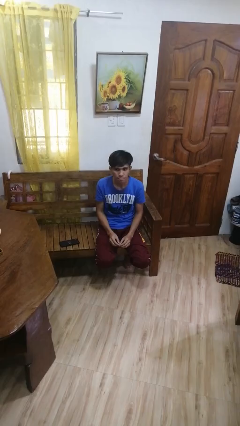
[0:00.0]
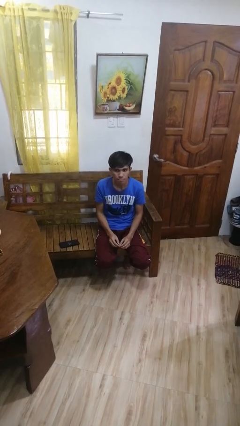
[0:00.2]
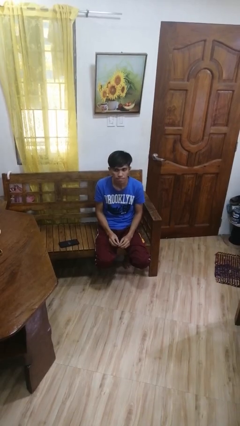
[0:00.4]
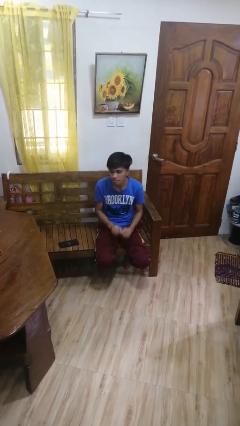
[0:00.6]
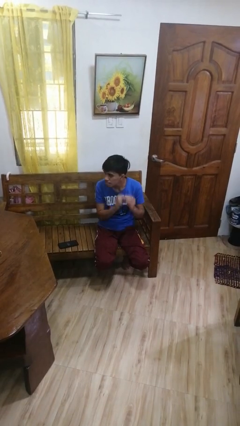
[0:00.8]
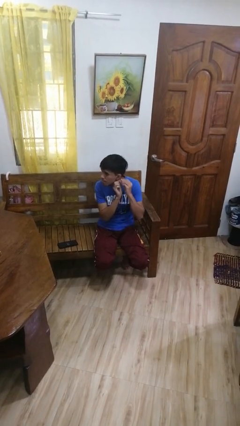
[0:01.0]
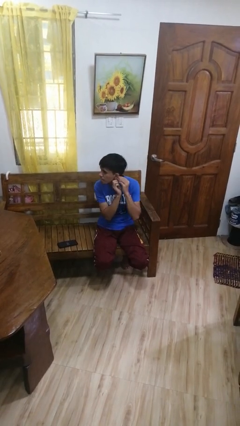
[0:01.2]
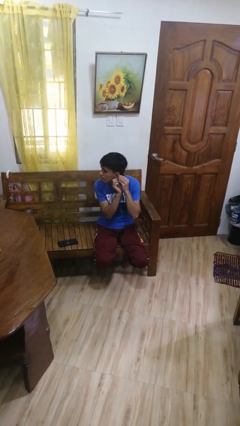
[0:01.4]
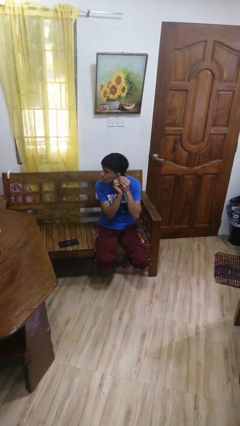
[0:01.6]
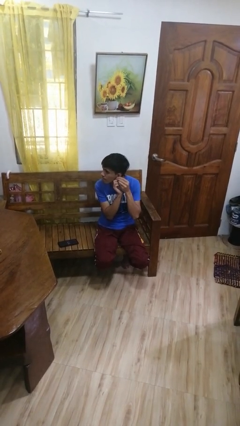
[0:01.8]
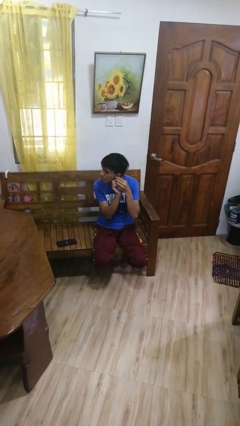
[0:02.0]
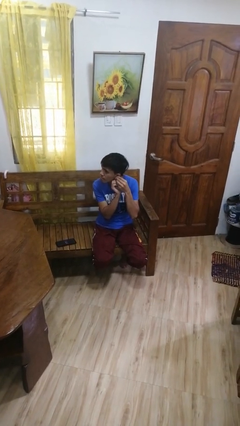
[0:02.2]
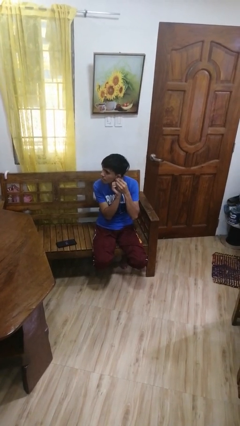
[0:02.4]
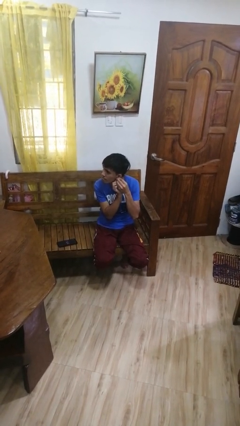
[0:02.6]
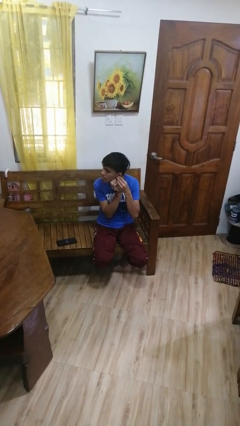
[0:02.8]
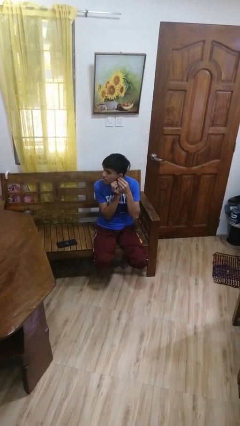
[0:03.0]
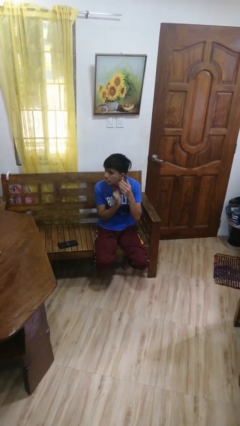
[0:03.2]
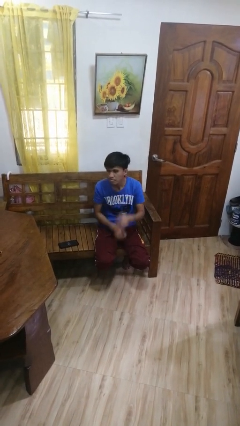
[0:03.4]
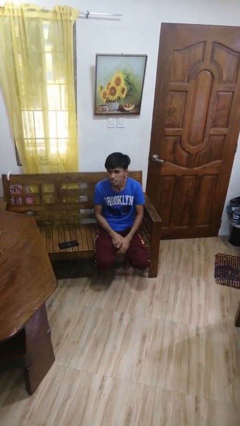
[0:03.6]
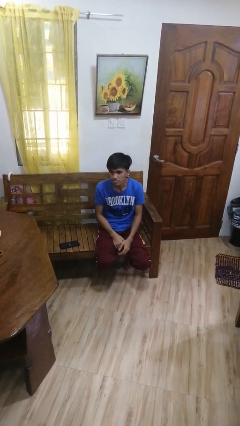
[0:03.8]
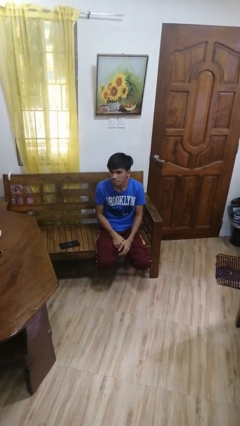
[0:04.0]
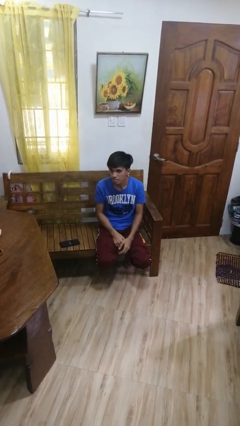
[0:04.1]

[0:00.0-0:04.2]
person puts on earrings

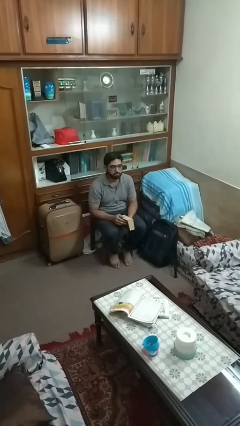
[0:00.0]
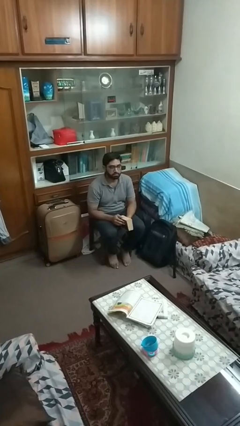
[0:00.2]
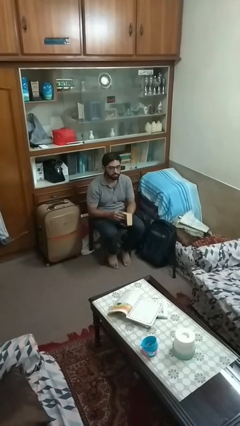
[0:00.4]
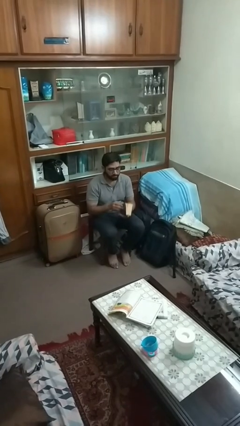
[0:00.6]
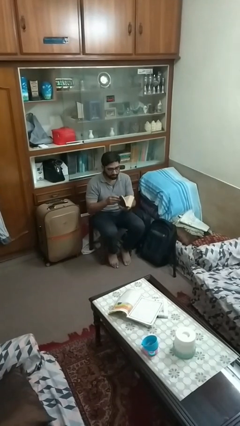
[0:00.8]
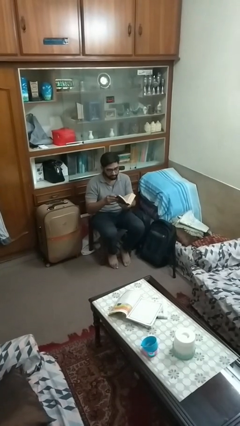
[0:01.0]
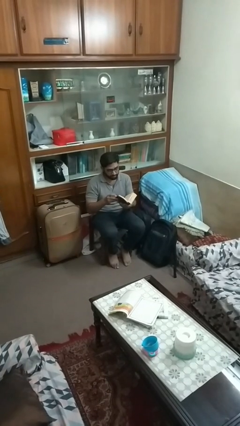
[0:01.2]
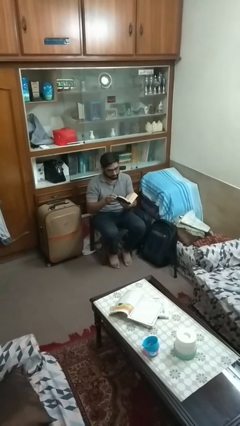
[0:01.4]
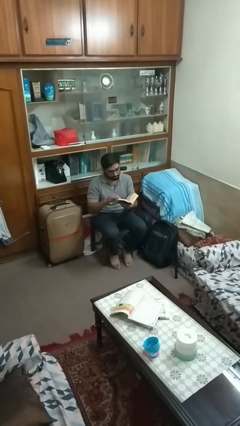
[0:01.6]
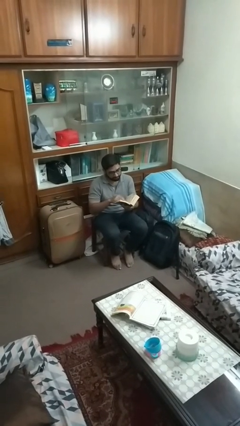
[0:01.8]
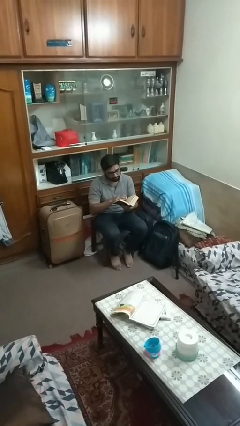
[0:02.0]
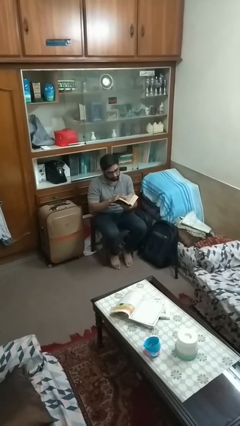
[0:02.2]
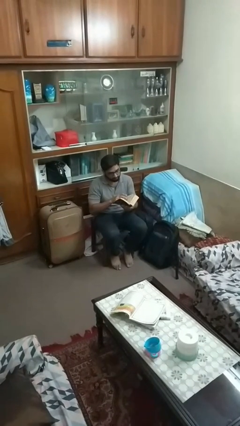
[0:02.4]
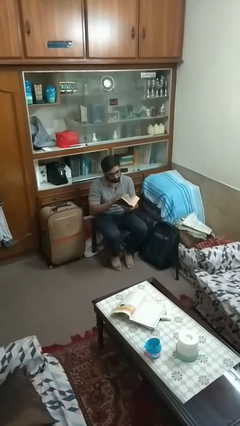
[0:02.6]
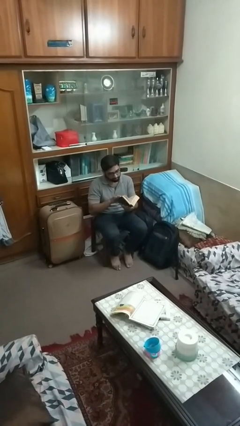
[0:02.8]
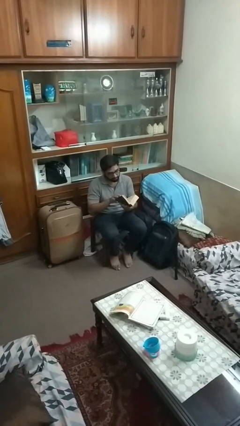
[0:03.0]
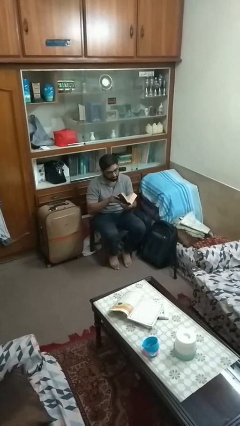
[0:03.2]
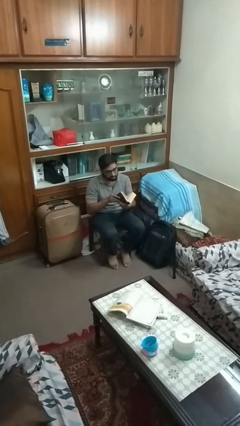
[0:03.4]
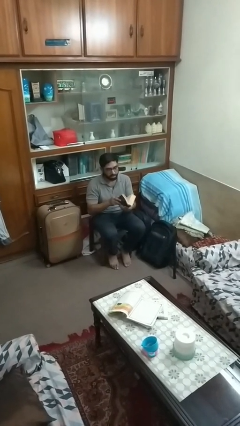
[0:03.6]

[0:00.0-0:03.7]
person reads book

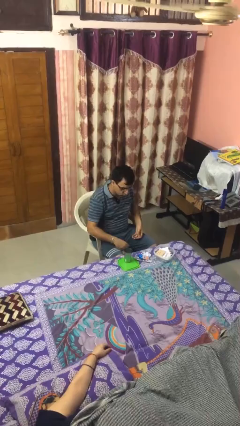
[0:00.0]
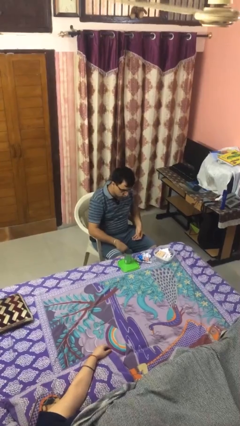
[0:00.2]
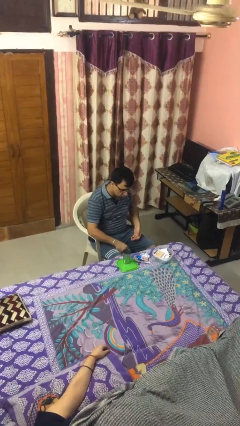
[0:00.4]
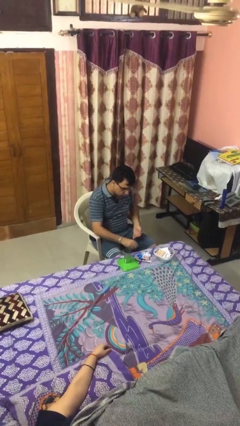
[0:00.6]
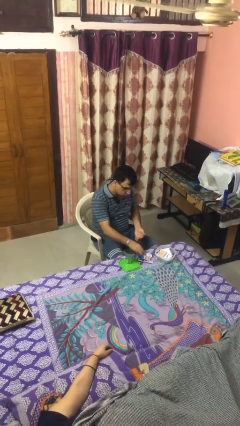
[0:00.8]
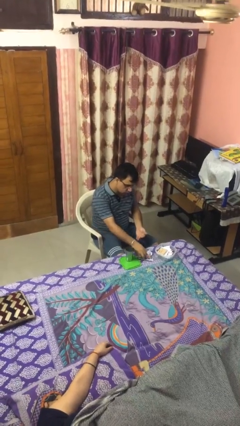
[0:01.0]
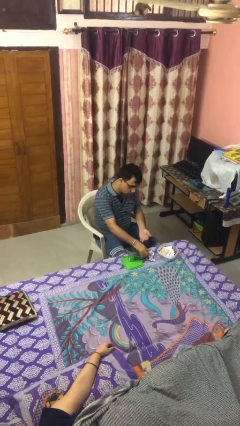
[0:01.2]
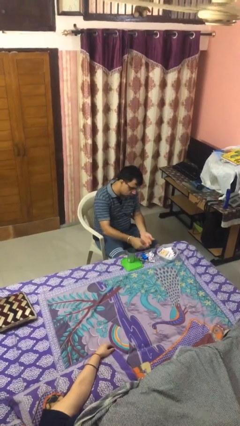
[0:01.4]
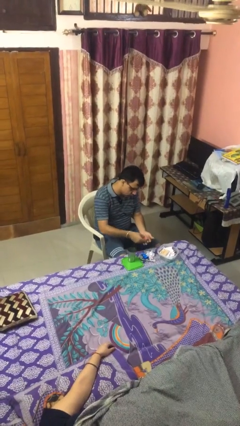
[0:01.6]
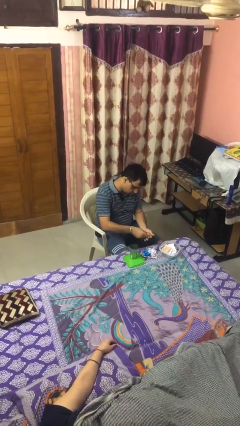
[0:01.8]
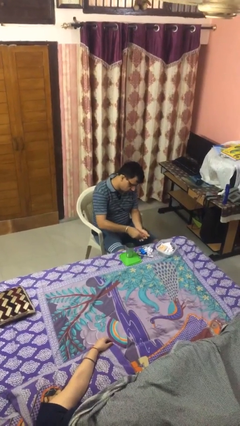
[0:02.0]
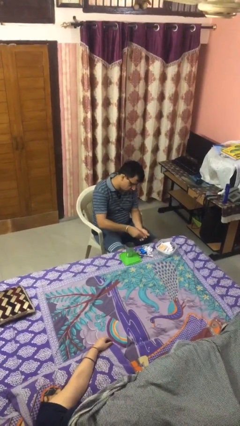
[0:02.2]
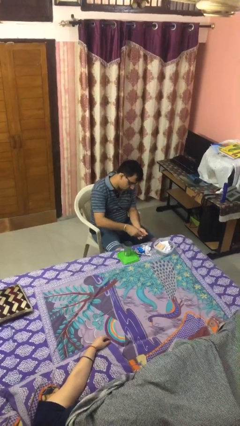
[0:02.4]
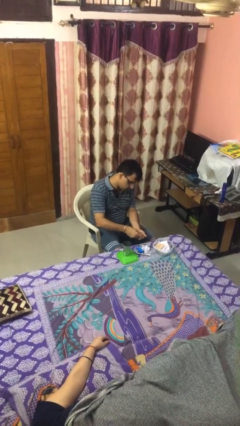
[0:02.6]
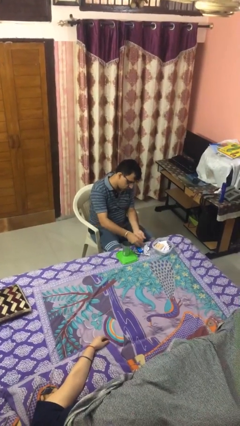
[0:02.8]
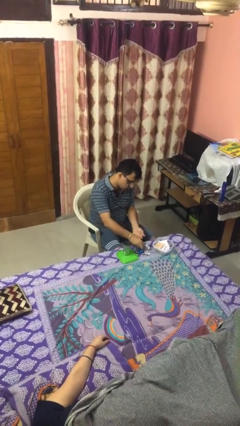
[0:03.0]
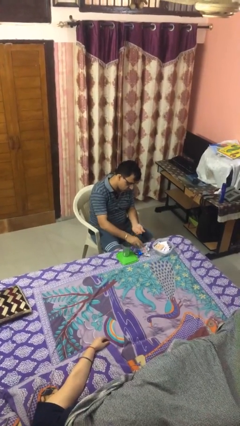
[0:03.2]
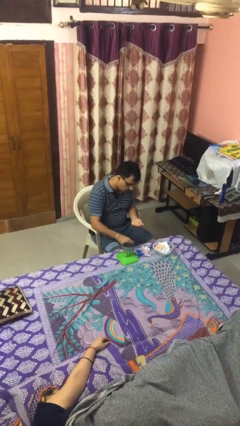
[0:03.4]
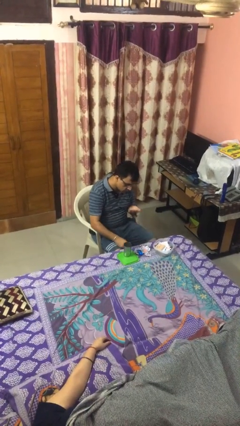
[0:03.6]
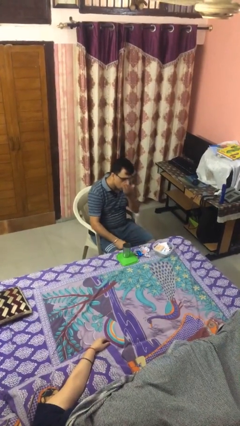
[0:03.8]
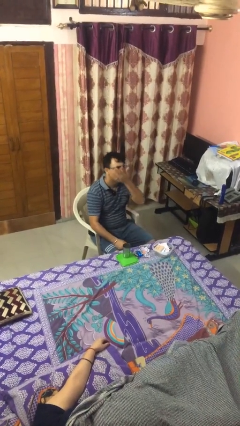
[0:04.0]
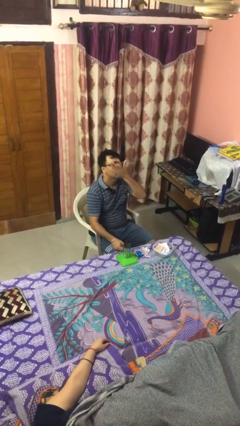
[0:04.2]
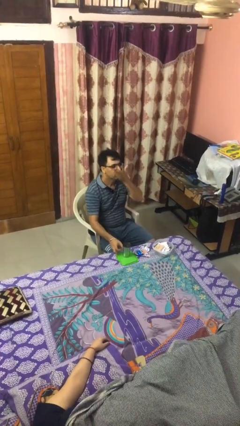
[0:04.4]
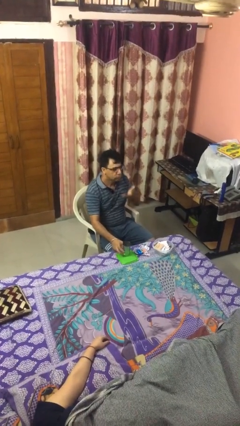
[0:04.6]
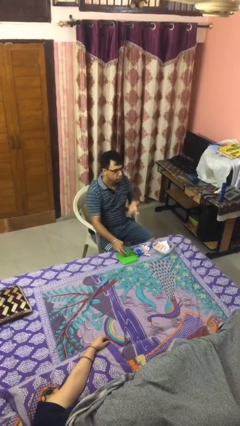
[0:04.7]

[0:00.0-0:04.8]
person takes medicine pills

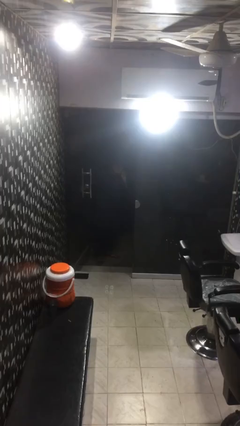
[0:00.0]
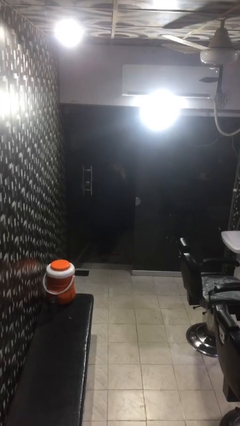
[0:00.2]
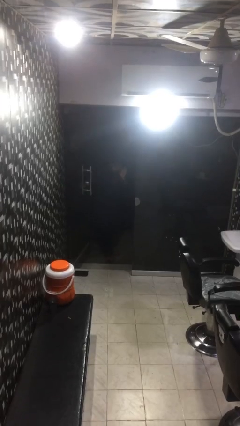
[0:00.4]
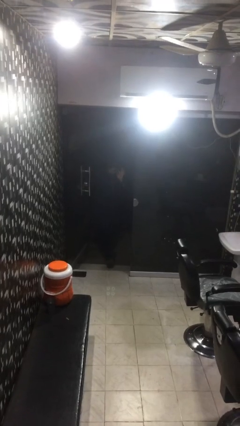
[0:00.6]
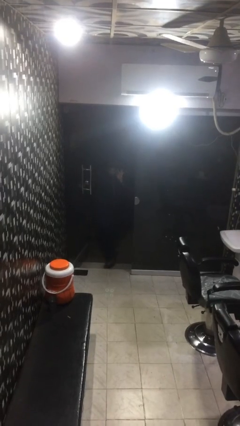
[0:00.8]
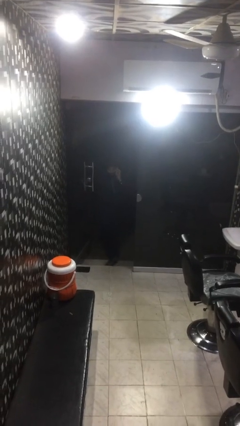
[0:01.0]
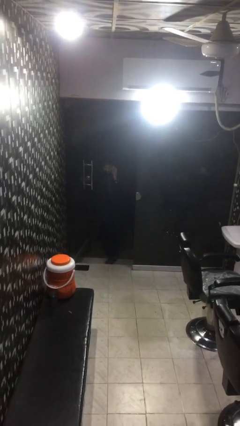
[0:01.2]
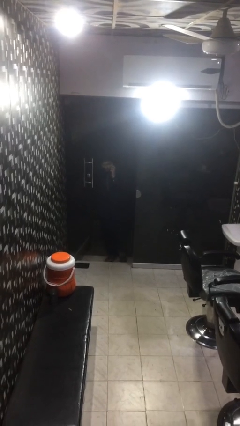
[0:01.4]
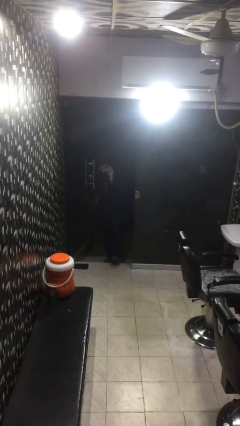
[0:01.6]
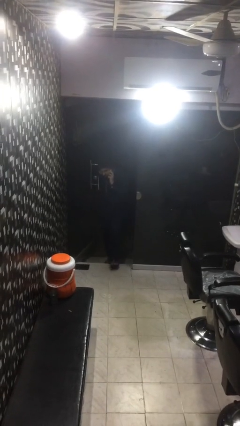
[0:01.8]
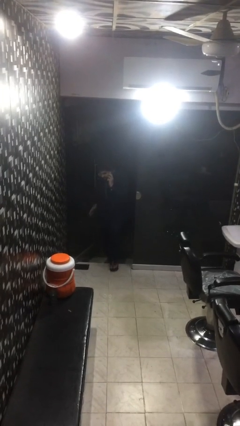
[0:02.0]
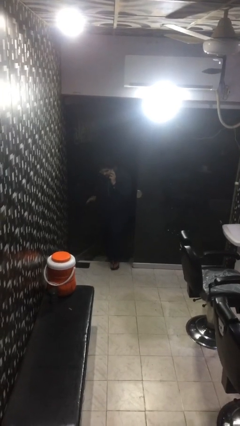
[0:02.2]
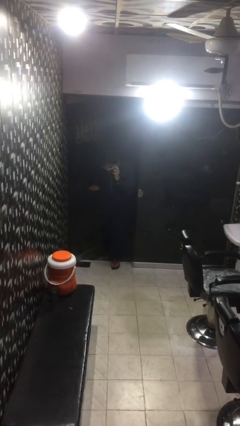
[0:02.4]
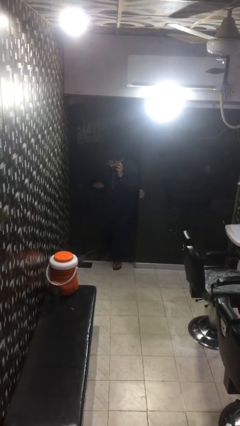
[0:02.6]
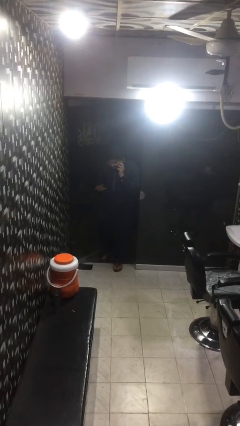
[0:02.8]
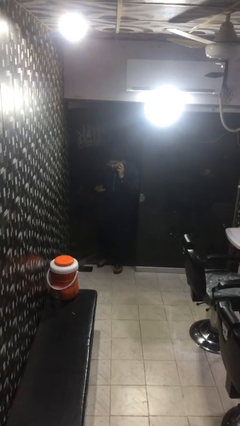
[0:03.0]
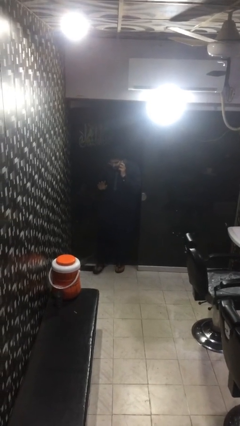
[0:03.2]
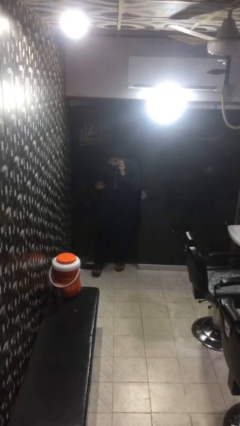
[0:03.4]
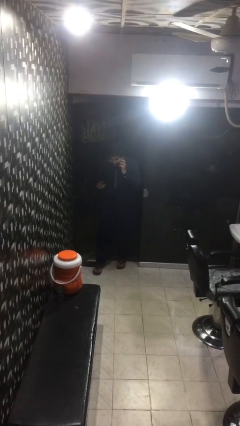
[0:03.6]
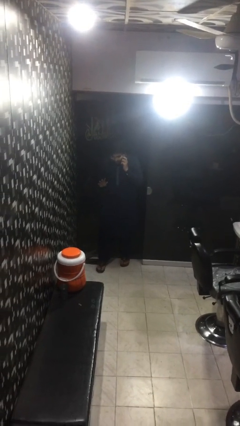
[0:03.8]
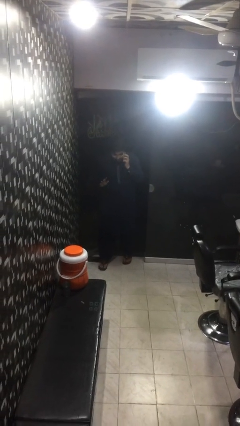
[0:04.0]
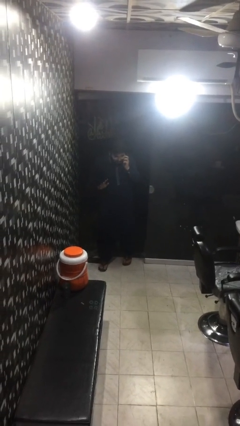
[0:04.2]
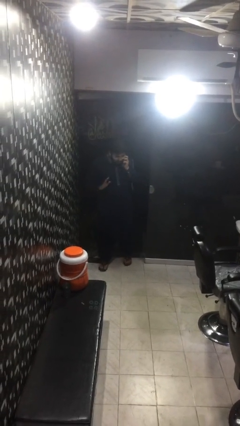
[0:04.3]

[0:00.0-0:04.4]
person enters scene through structure

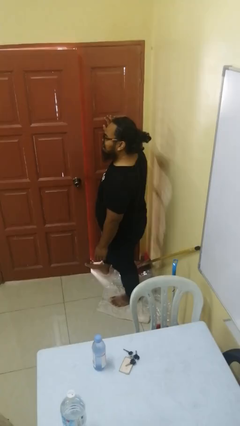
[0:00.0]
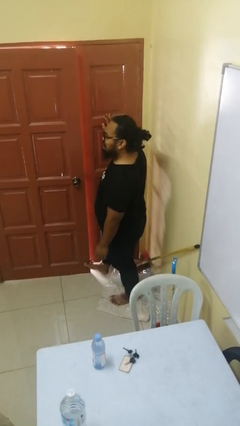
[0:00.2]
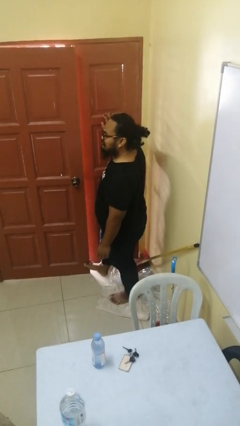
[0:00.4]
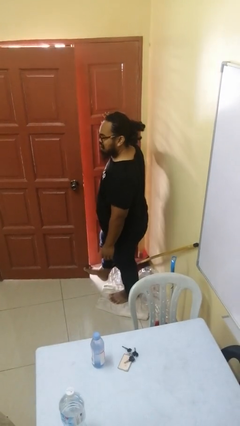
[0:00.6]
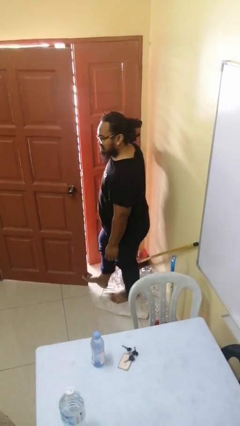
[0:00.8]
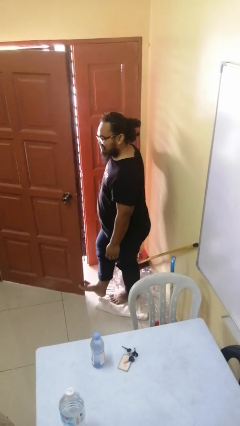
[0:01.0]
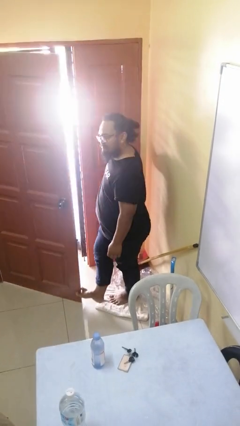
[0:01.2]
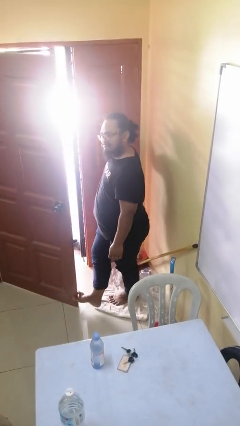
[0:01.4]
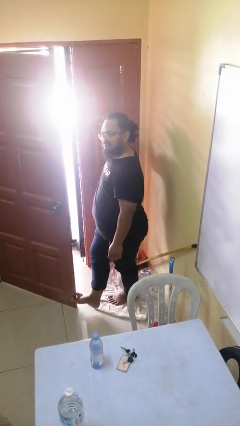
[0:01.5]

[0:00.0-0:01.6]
person opens facility door
